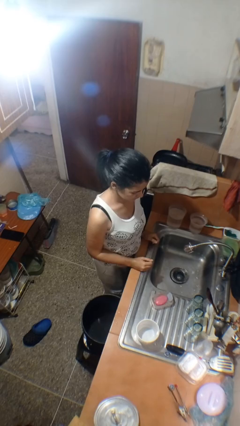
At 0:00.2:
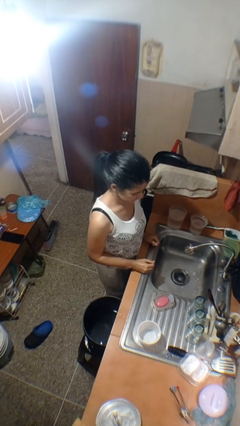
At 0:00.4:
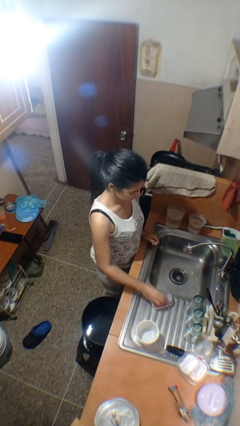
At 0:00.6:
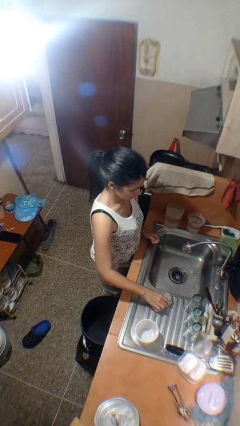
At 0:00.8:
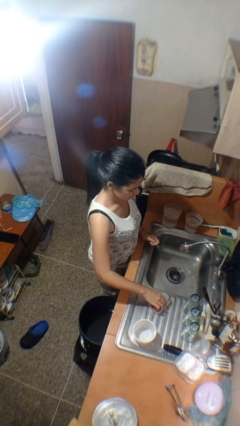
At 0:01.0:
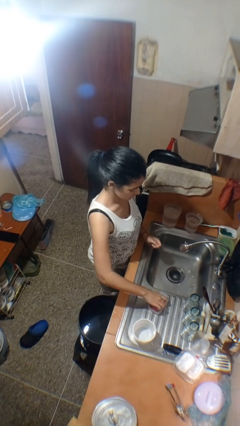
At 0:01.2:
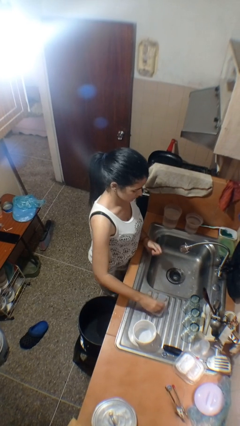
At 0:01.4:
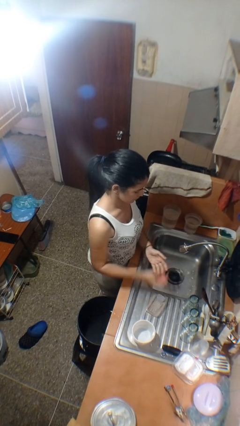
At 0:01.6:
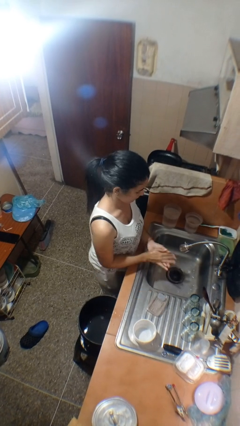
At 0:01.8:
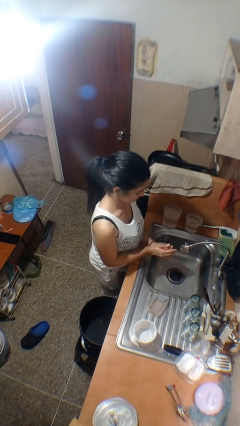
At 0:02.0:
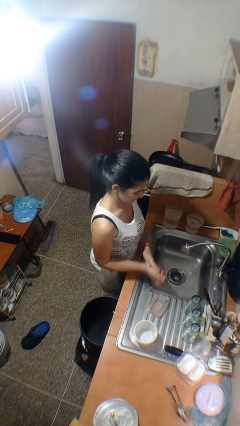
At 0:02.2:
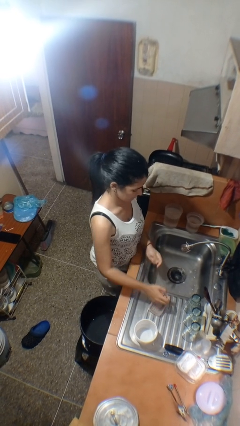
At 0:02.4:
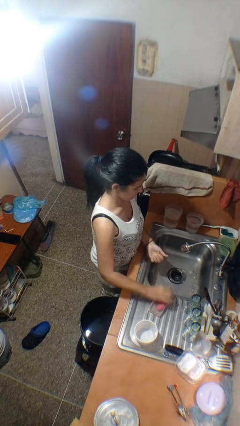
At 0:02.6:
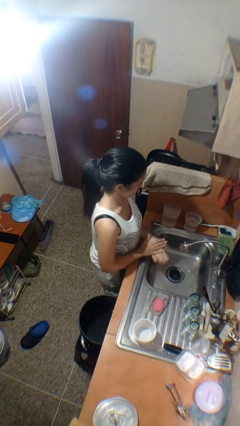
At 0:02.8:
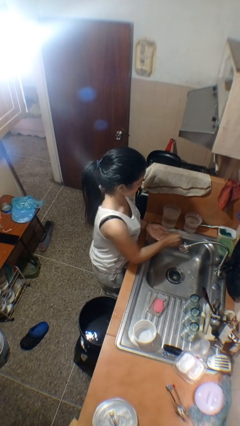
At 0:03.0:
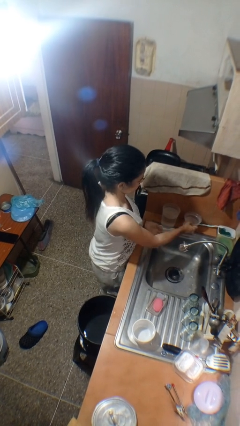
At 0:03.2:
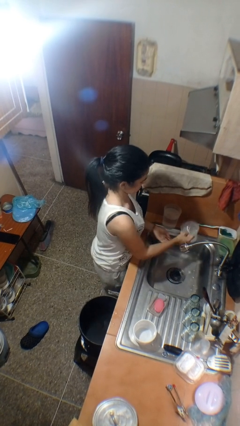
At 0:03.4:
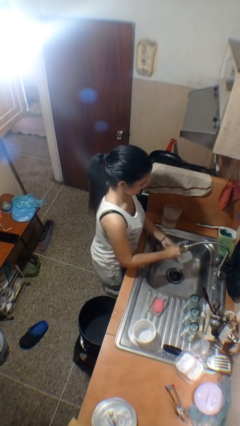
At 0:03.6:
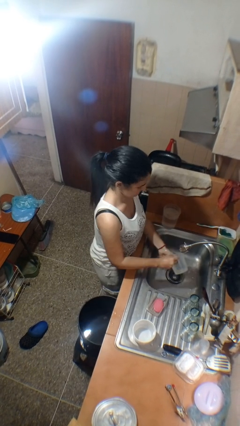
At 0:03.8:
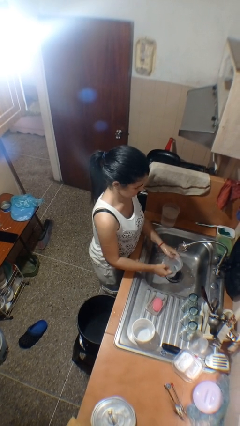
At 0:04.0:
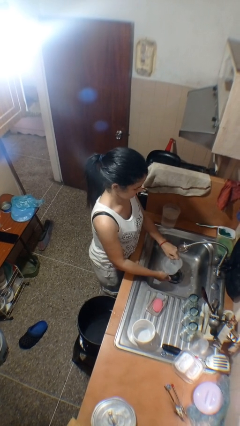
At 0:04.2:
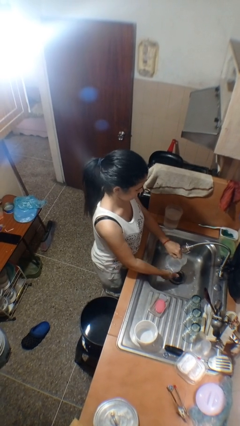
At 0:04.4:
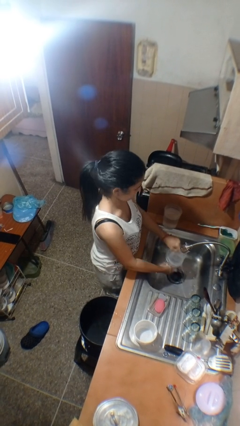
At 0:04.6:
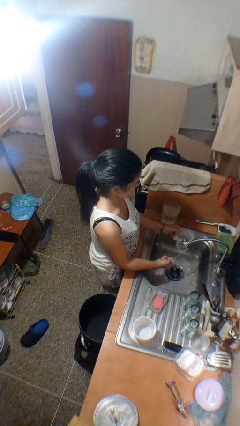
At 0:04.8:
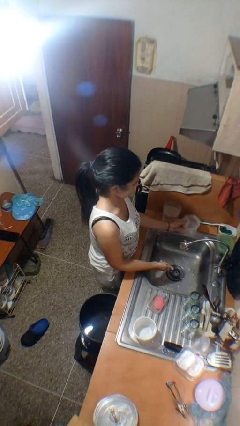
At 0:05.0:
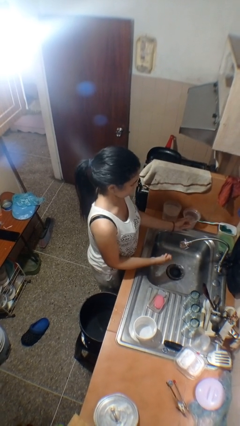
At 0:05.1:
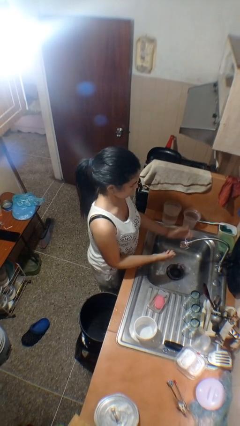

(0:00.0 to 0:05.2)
person washes hands

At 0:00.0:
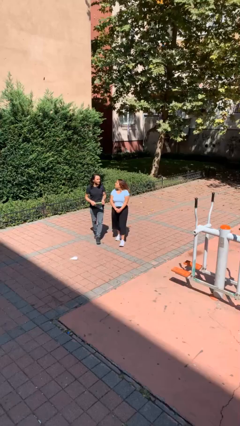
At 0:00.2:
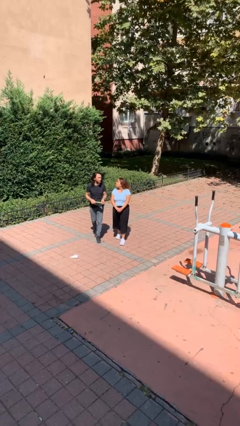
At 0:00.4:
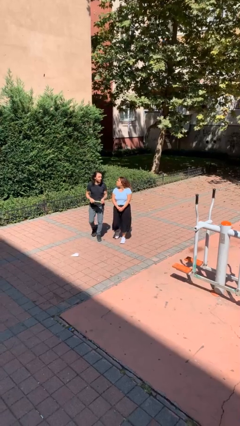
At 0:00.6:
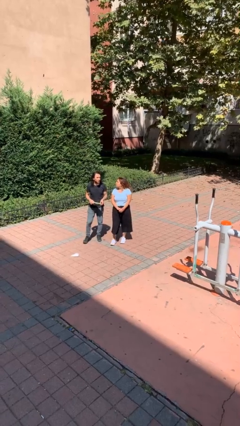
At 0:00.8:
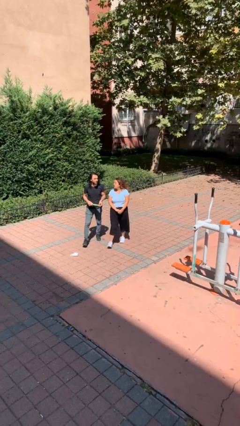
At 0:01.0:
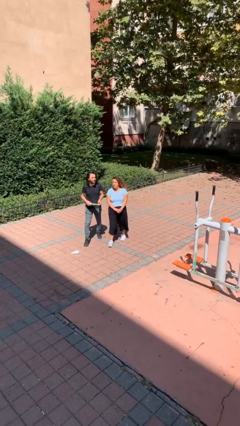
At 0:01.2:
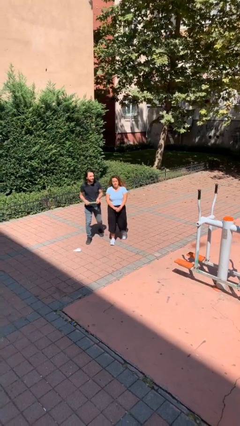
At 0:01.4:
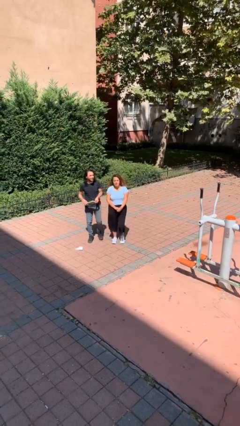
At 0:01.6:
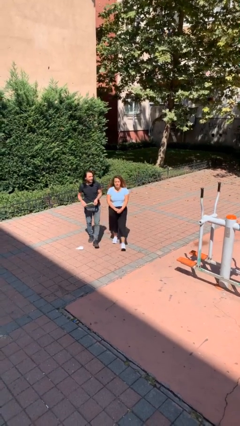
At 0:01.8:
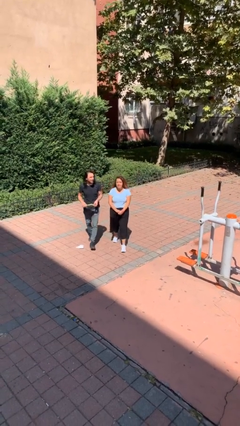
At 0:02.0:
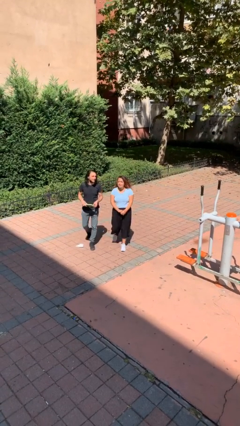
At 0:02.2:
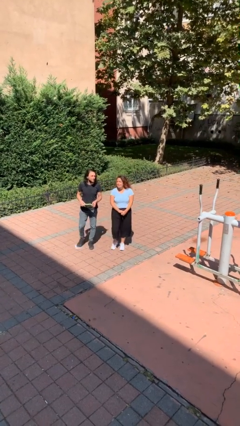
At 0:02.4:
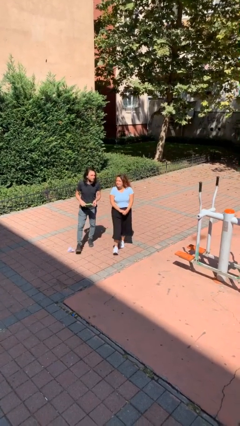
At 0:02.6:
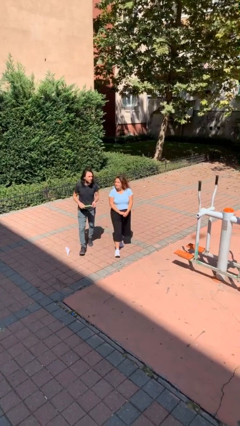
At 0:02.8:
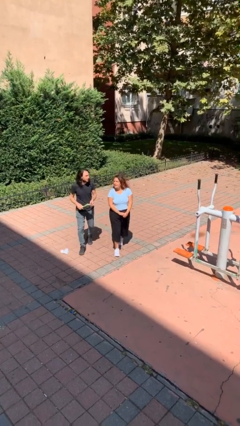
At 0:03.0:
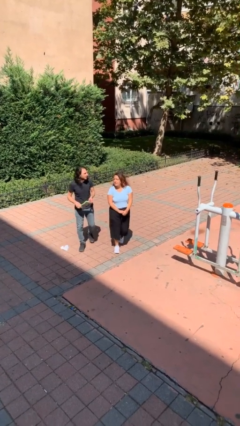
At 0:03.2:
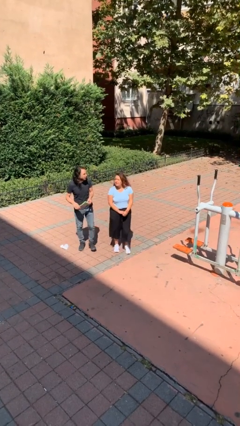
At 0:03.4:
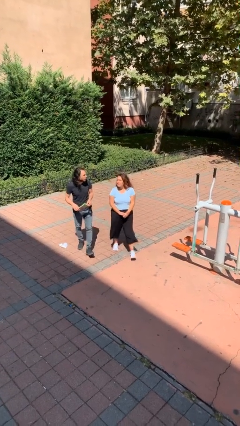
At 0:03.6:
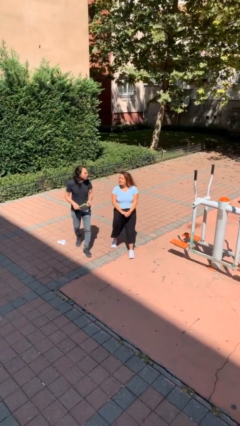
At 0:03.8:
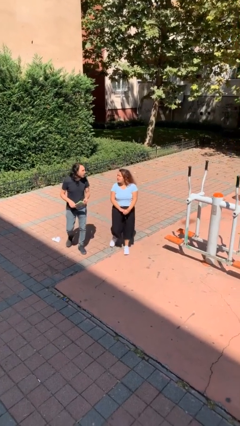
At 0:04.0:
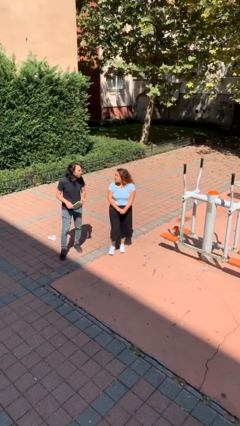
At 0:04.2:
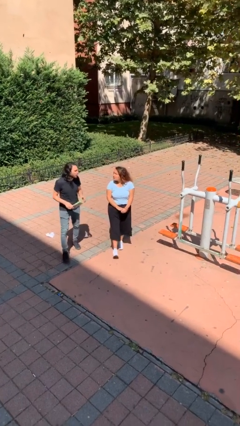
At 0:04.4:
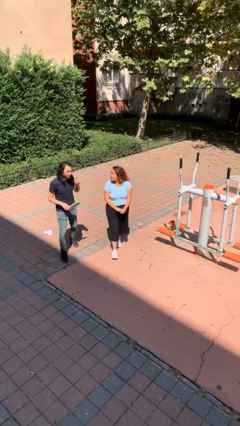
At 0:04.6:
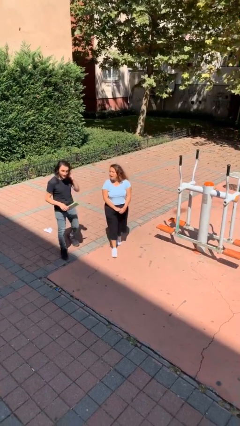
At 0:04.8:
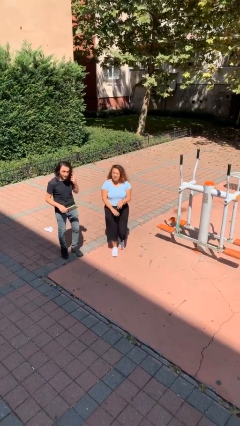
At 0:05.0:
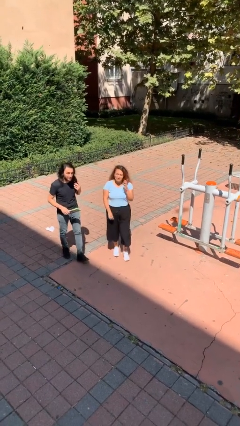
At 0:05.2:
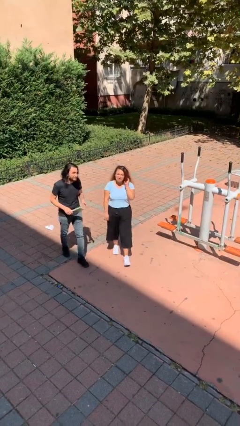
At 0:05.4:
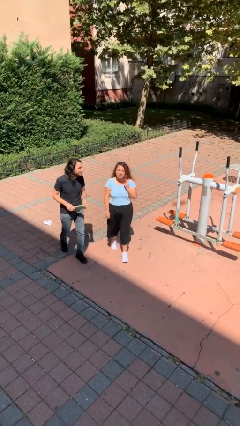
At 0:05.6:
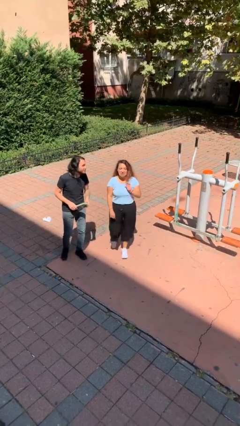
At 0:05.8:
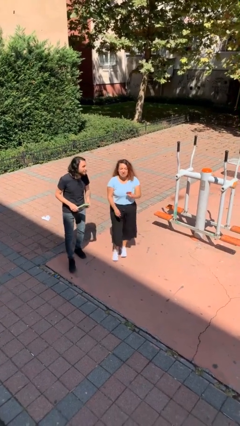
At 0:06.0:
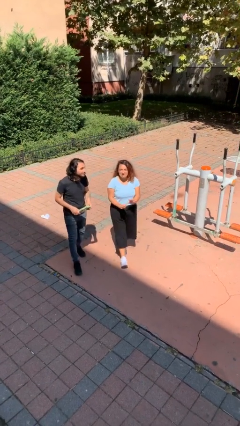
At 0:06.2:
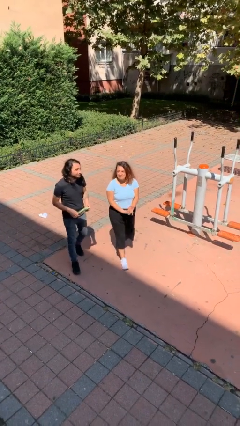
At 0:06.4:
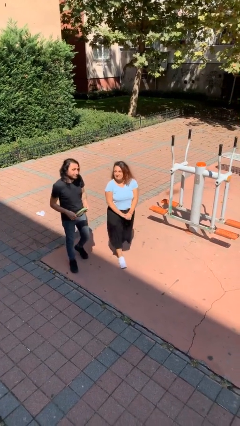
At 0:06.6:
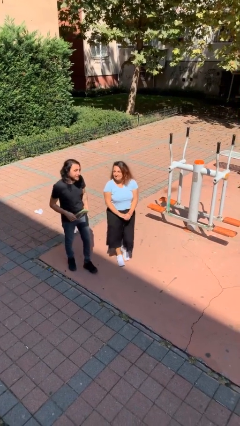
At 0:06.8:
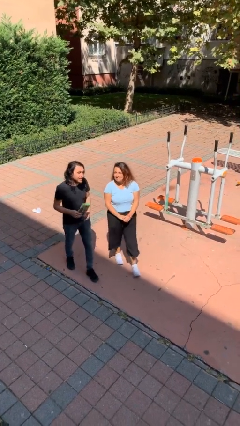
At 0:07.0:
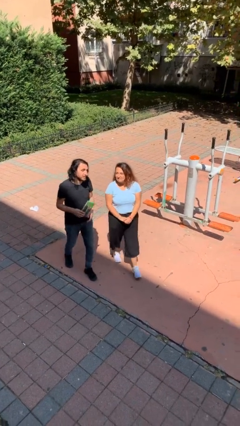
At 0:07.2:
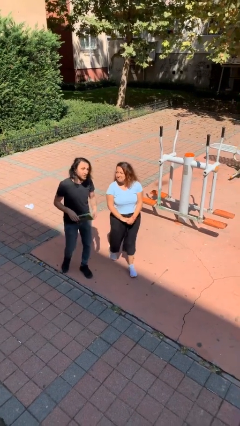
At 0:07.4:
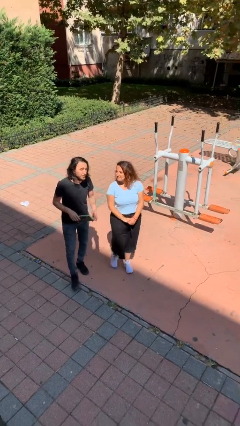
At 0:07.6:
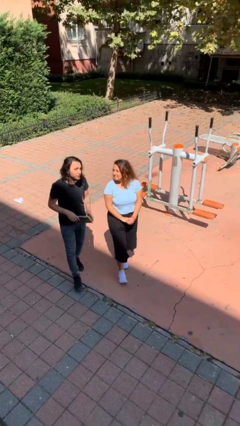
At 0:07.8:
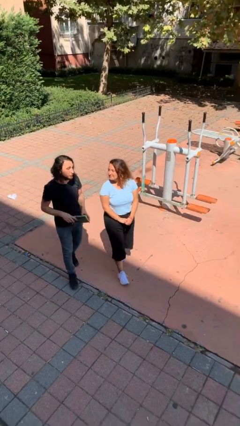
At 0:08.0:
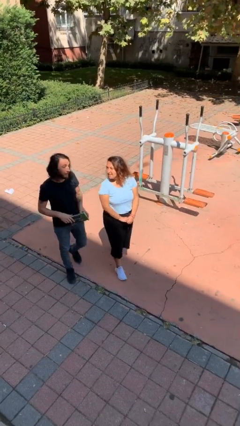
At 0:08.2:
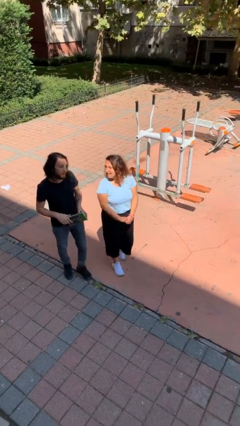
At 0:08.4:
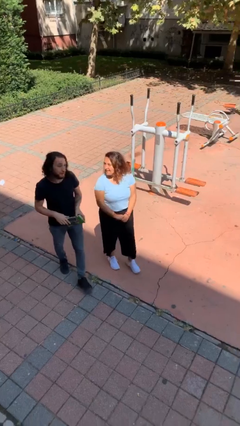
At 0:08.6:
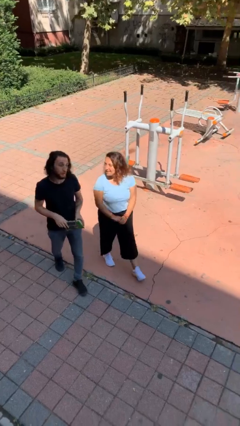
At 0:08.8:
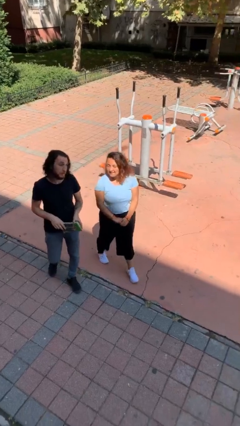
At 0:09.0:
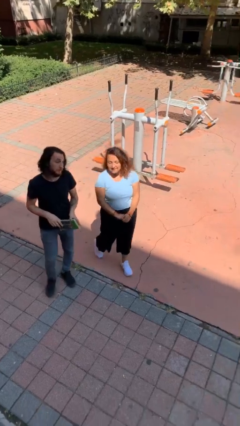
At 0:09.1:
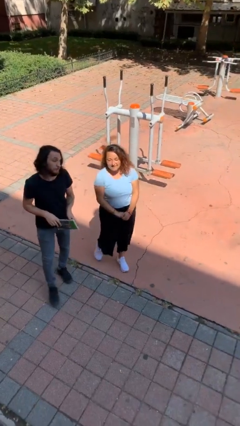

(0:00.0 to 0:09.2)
person talks to person

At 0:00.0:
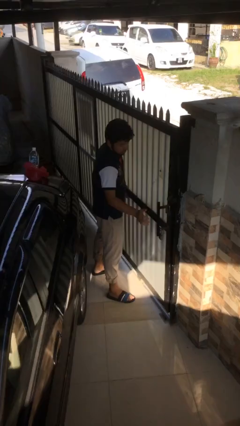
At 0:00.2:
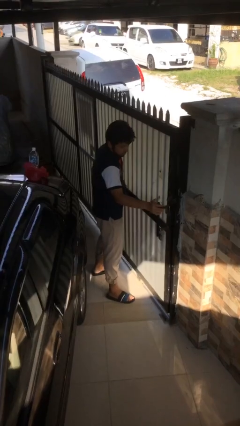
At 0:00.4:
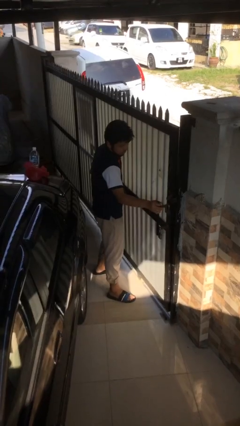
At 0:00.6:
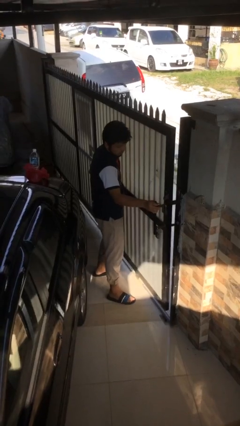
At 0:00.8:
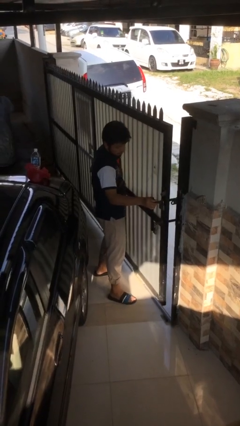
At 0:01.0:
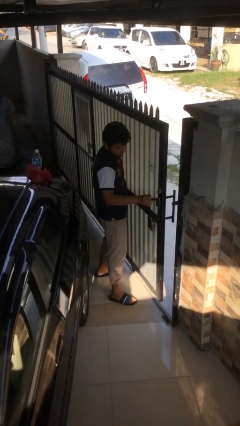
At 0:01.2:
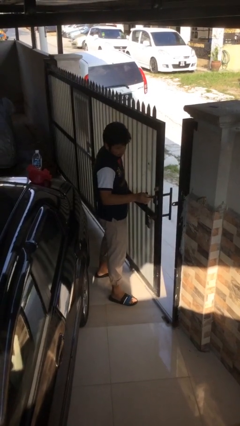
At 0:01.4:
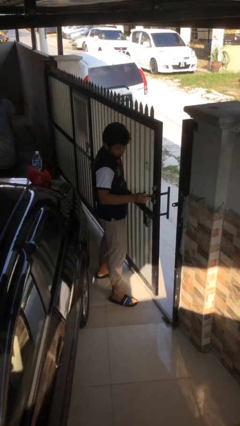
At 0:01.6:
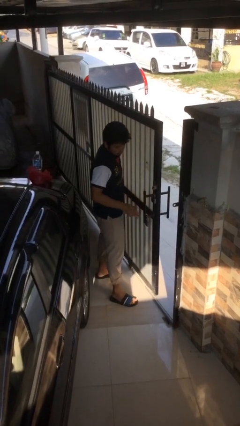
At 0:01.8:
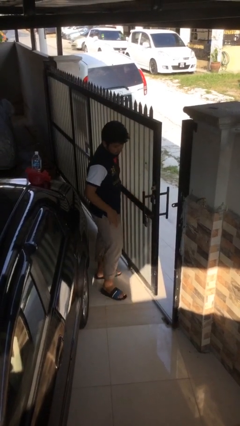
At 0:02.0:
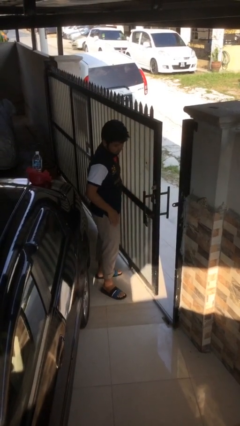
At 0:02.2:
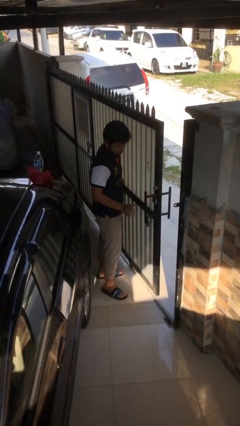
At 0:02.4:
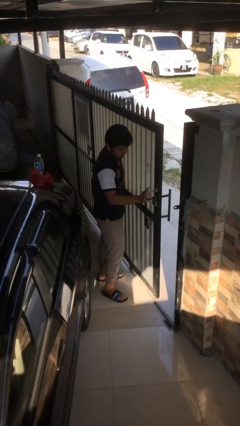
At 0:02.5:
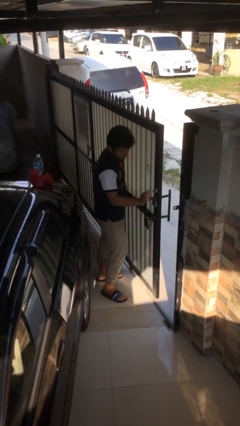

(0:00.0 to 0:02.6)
person opens sliding door

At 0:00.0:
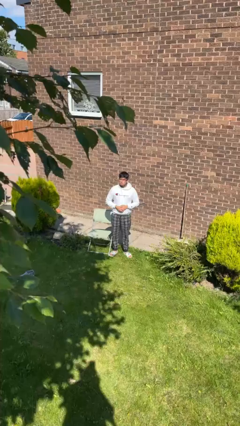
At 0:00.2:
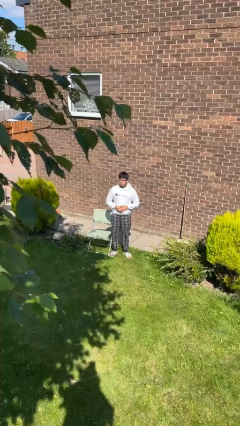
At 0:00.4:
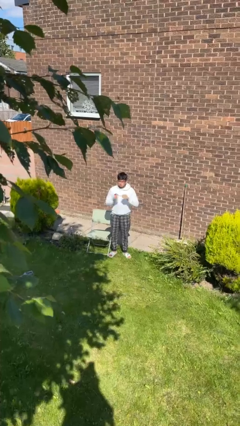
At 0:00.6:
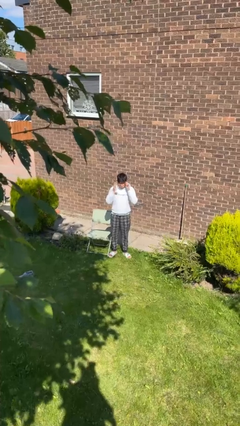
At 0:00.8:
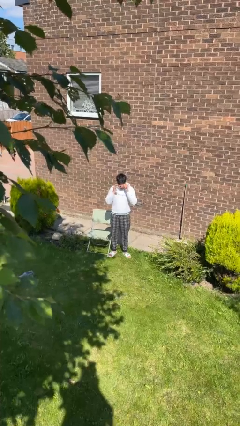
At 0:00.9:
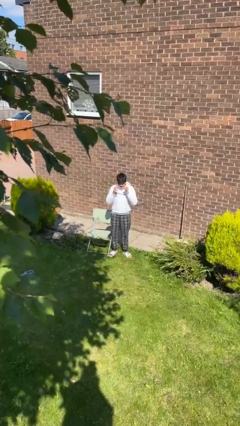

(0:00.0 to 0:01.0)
person takes off glasses
